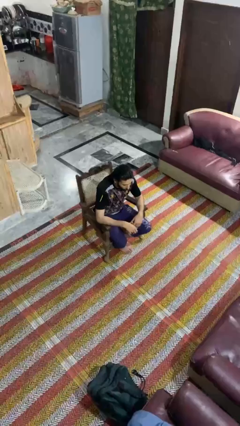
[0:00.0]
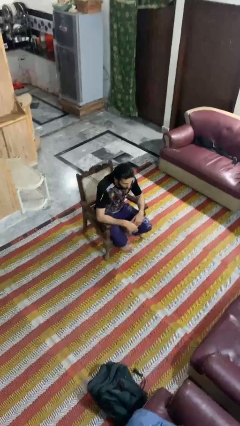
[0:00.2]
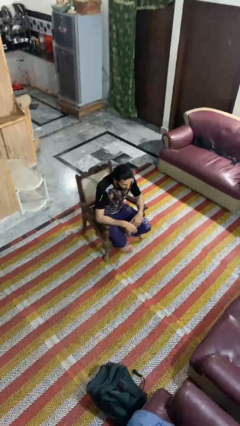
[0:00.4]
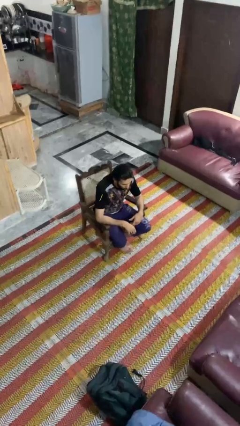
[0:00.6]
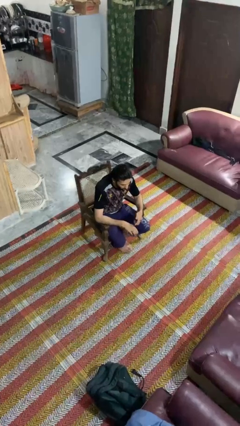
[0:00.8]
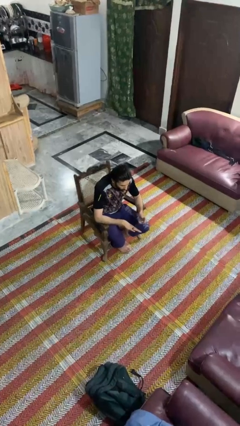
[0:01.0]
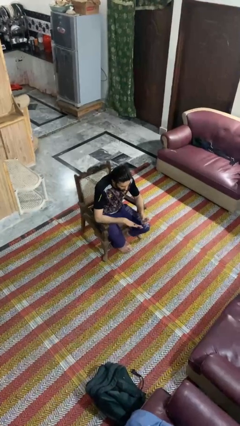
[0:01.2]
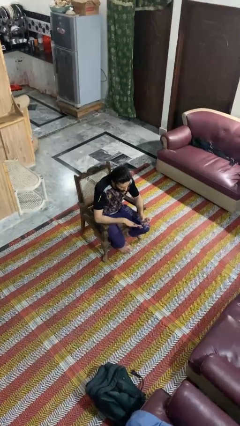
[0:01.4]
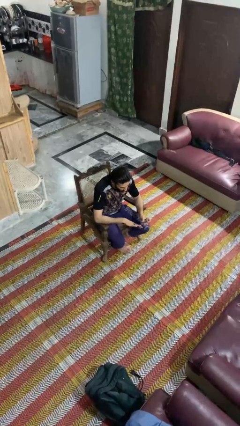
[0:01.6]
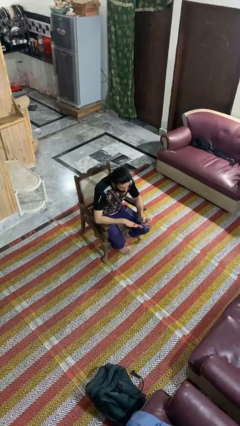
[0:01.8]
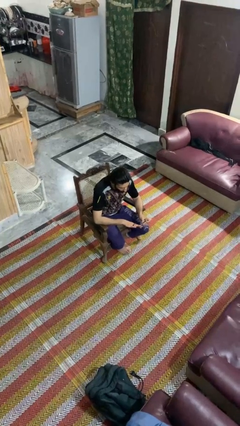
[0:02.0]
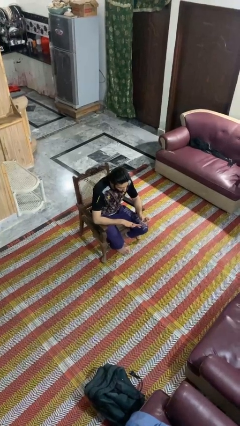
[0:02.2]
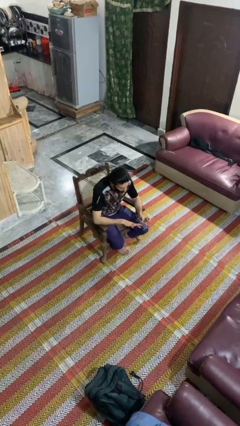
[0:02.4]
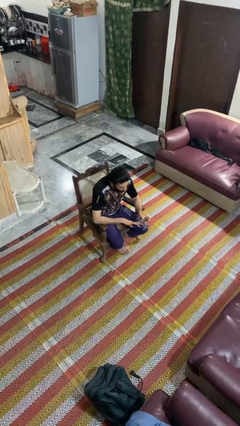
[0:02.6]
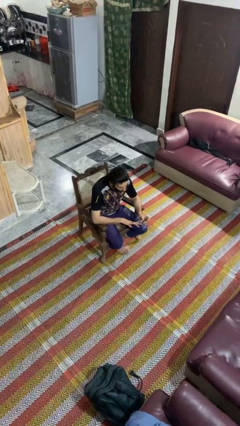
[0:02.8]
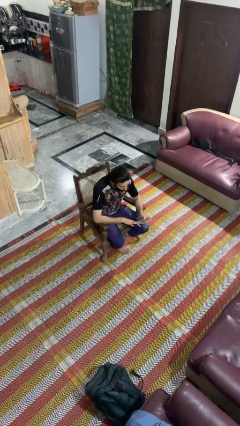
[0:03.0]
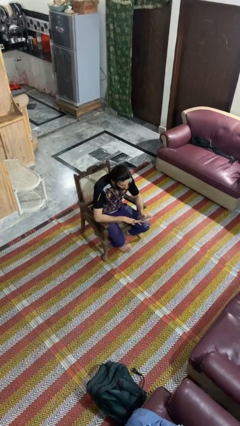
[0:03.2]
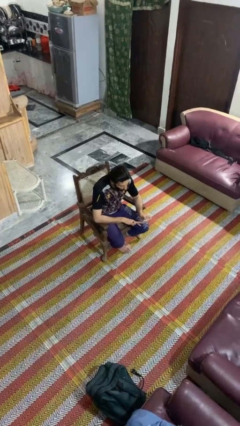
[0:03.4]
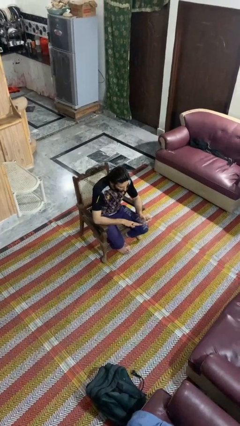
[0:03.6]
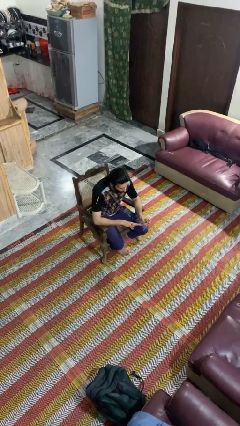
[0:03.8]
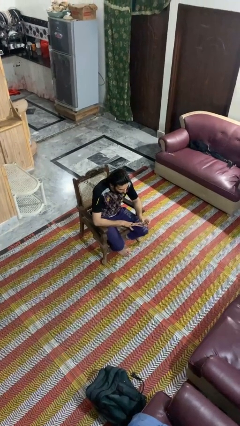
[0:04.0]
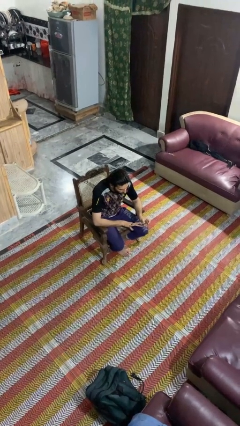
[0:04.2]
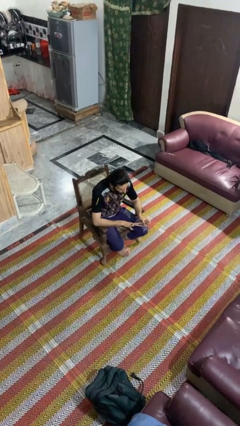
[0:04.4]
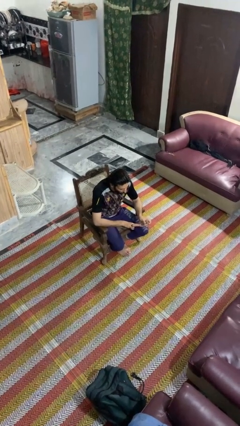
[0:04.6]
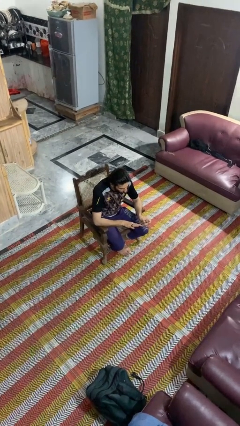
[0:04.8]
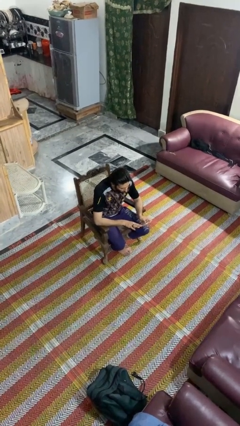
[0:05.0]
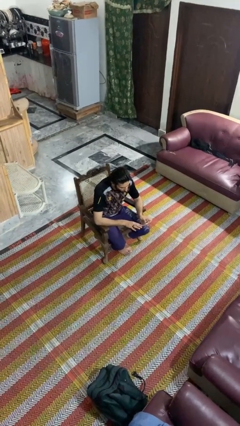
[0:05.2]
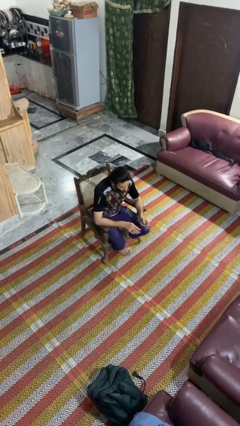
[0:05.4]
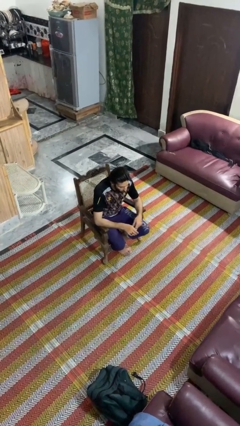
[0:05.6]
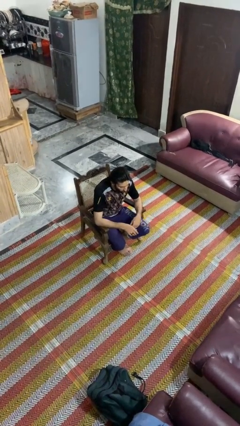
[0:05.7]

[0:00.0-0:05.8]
person clips fingernails

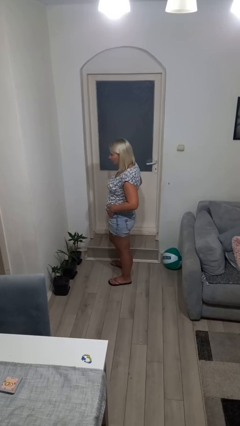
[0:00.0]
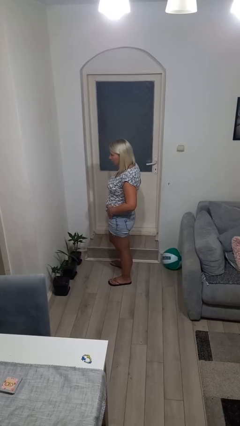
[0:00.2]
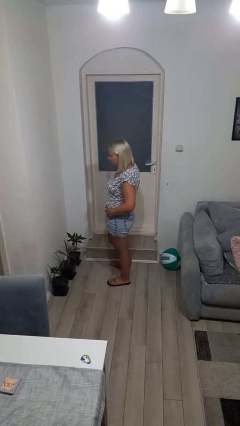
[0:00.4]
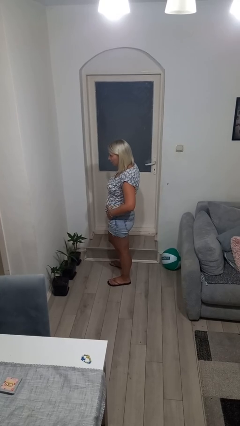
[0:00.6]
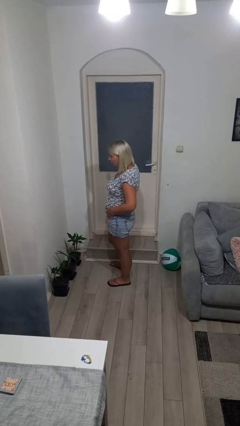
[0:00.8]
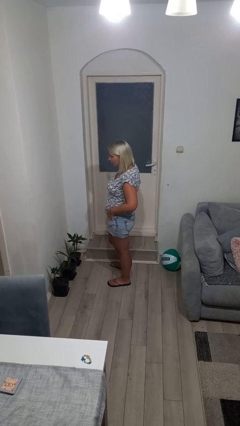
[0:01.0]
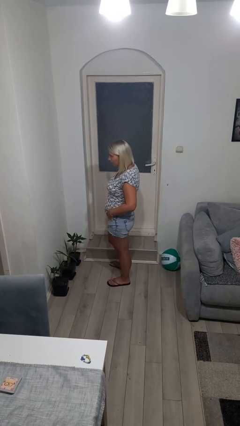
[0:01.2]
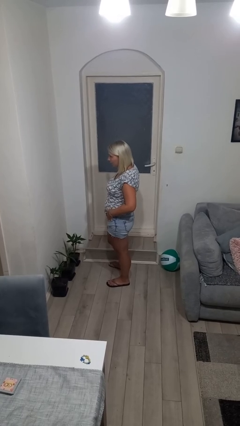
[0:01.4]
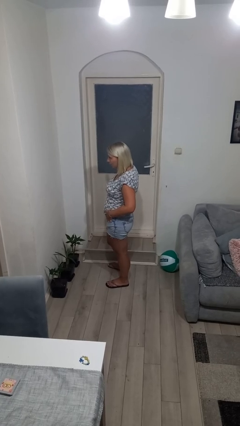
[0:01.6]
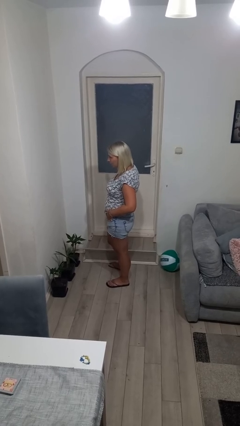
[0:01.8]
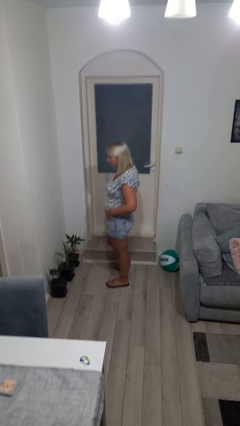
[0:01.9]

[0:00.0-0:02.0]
person puts hands in back pockets

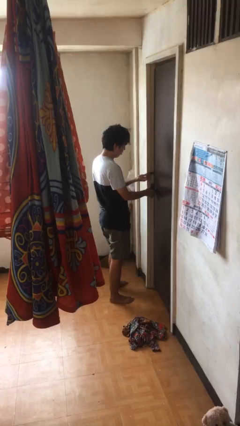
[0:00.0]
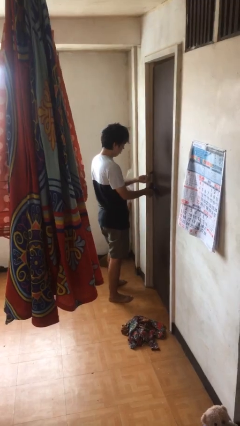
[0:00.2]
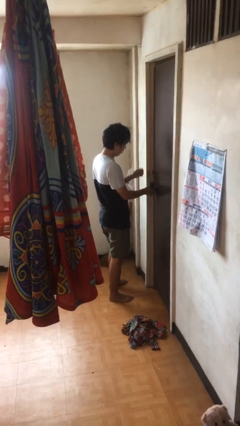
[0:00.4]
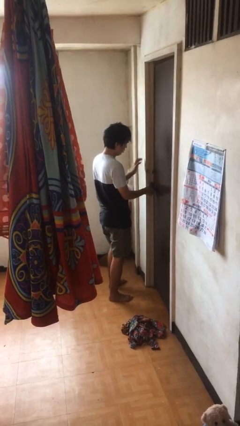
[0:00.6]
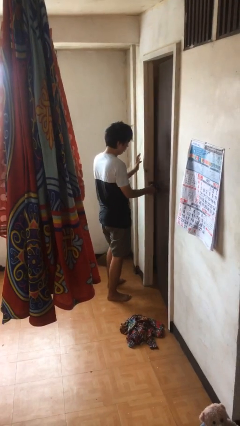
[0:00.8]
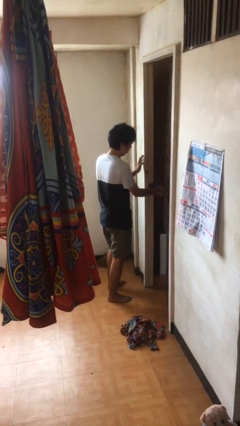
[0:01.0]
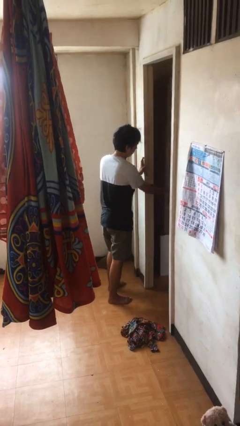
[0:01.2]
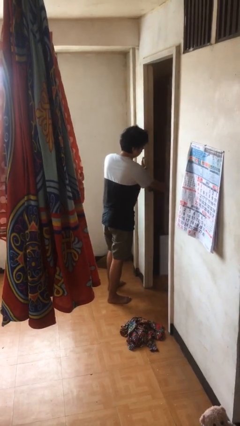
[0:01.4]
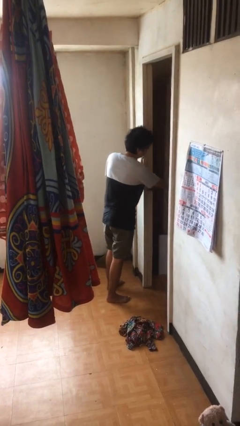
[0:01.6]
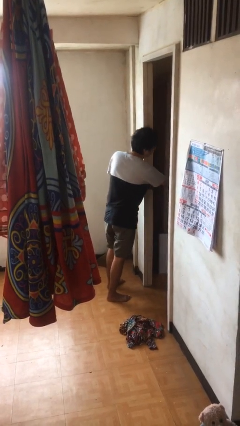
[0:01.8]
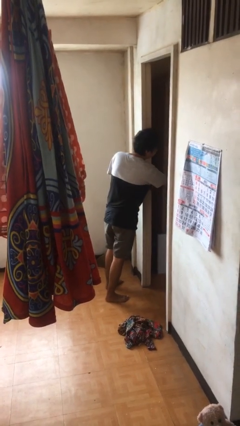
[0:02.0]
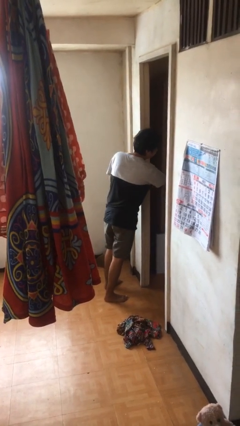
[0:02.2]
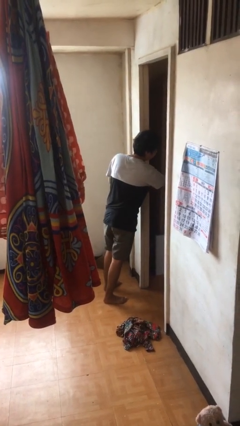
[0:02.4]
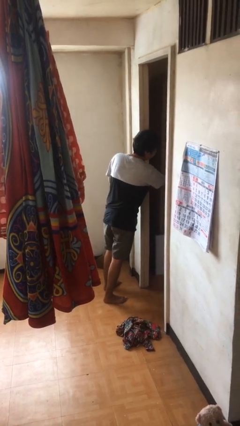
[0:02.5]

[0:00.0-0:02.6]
person opens facility door

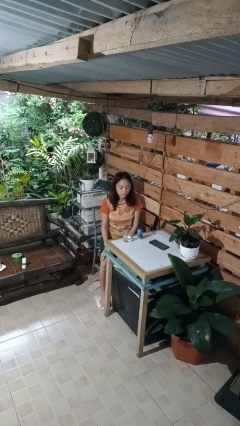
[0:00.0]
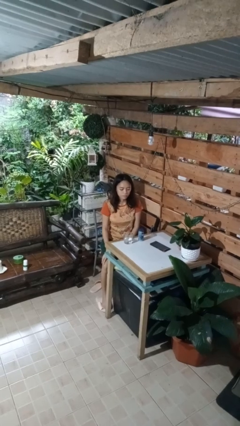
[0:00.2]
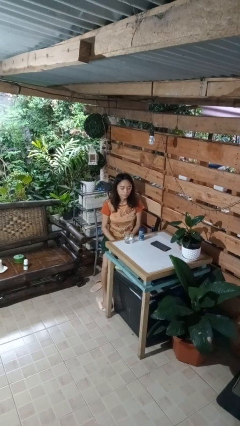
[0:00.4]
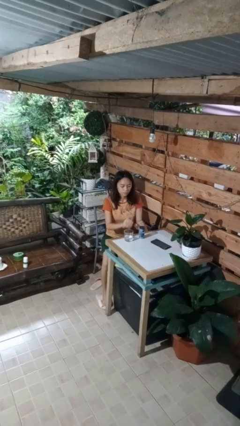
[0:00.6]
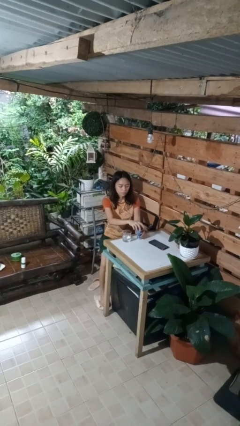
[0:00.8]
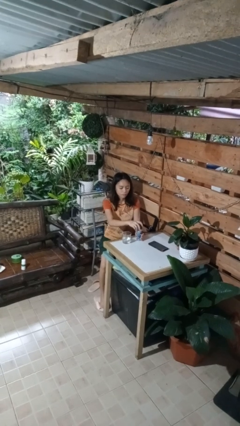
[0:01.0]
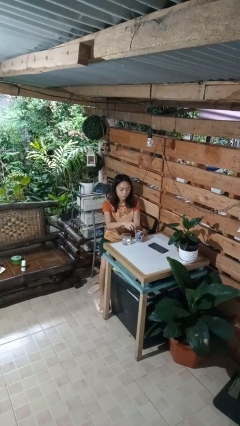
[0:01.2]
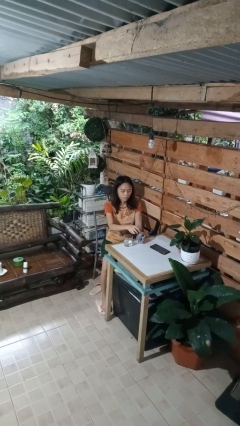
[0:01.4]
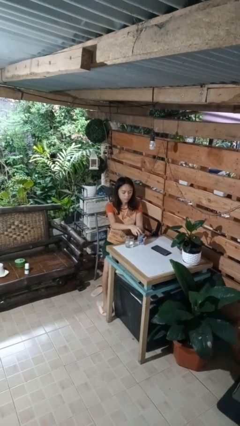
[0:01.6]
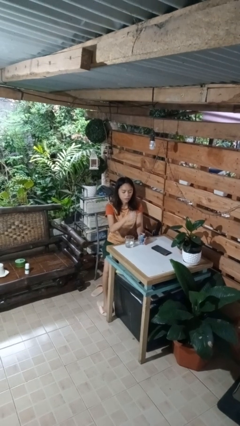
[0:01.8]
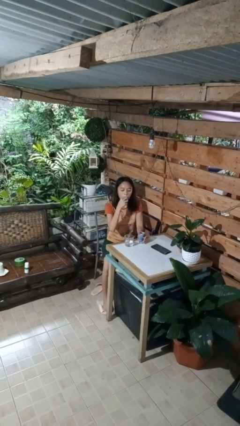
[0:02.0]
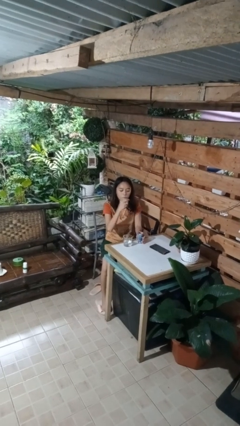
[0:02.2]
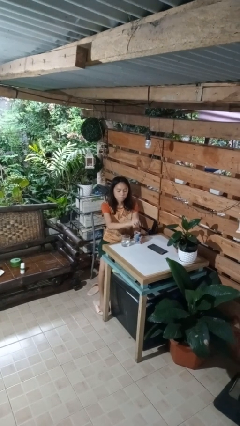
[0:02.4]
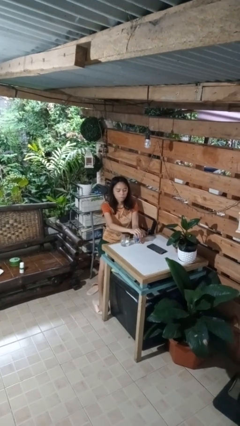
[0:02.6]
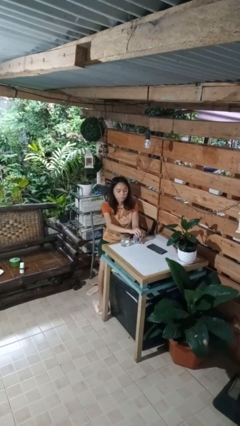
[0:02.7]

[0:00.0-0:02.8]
person takes medicine pills

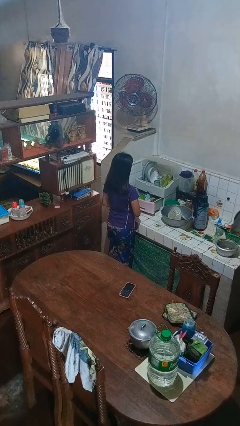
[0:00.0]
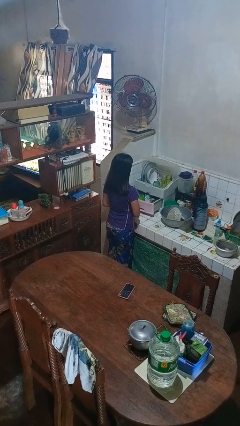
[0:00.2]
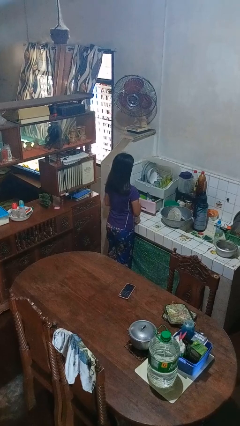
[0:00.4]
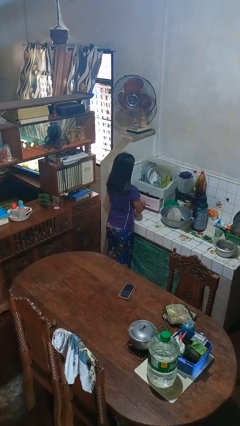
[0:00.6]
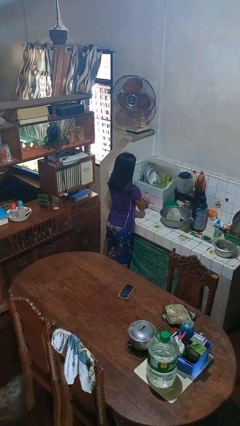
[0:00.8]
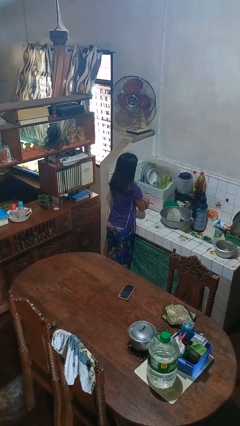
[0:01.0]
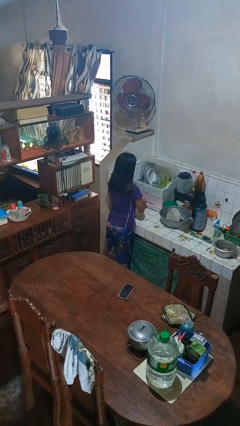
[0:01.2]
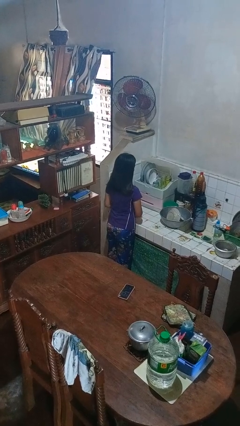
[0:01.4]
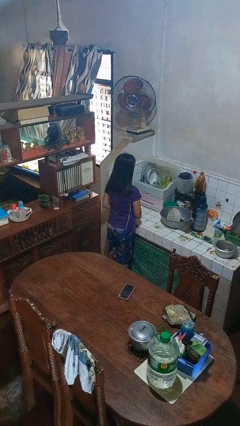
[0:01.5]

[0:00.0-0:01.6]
person closes kitchen drawer

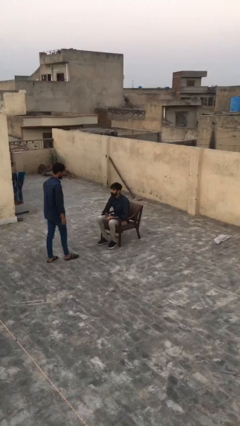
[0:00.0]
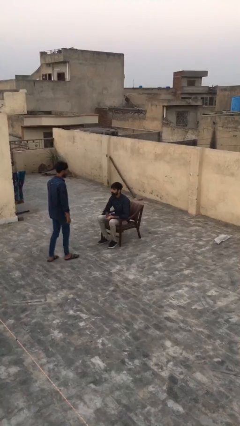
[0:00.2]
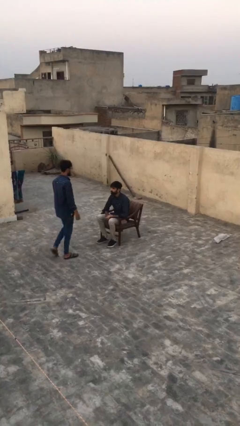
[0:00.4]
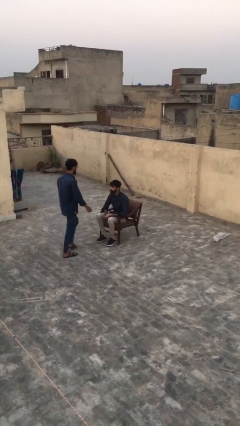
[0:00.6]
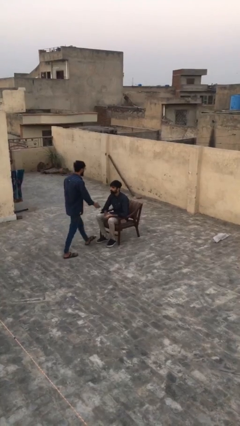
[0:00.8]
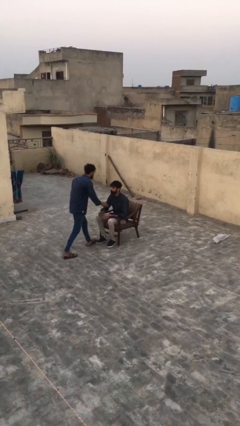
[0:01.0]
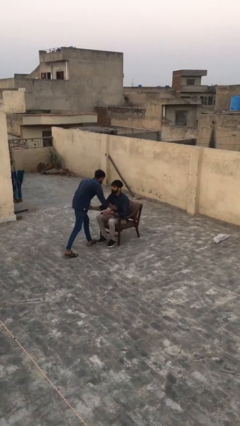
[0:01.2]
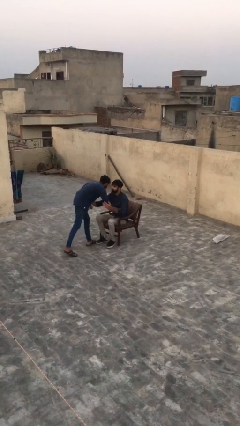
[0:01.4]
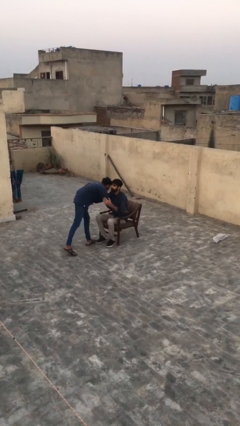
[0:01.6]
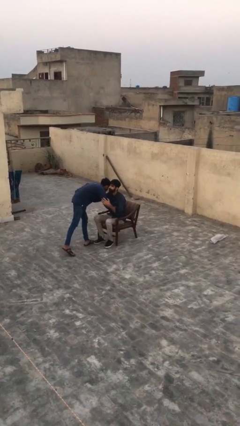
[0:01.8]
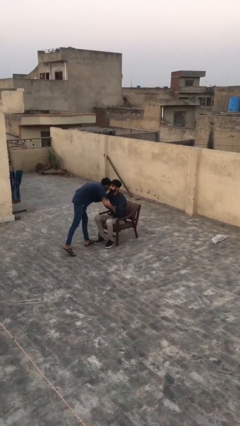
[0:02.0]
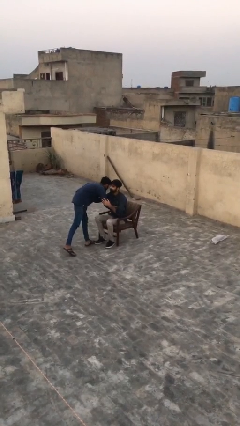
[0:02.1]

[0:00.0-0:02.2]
person embraces person

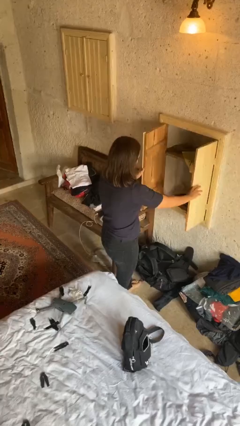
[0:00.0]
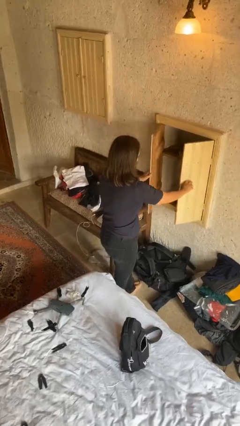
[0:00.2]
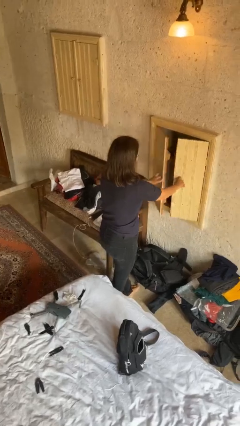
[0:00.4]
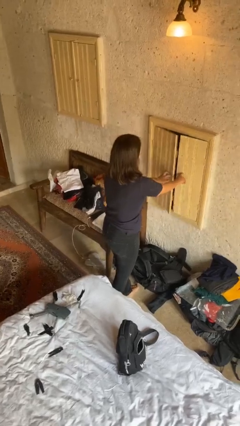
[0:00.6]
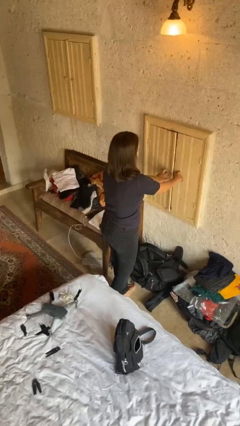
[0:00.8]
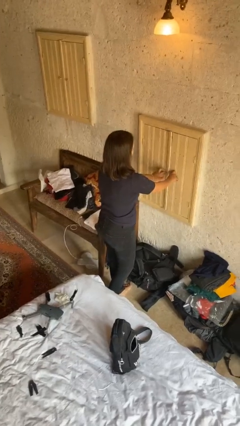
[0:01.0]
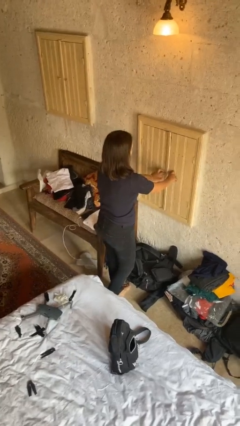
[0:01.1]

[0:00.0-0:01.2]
person closes closet door
